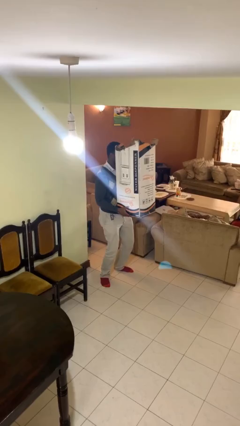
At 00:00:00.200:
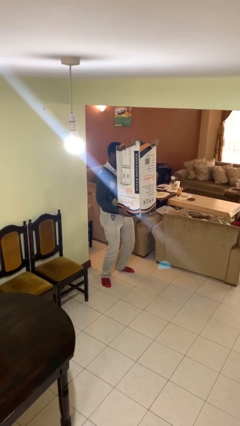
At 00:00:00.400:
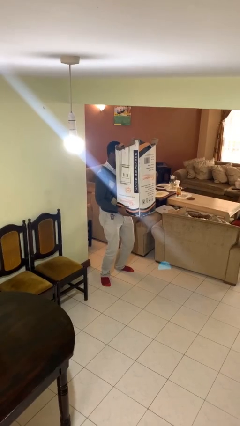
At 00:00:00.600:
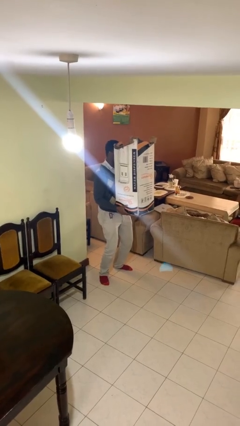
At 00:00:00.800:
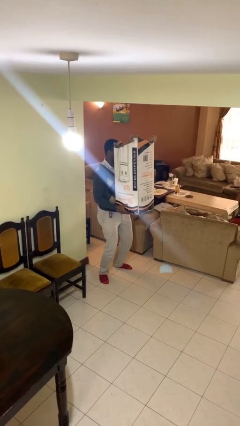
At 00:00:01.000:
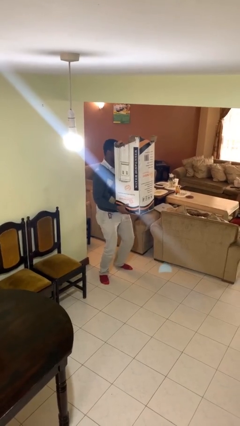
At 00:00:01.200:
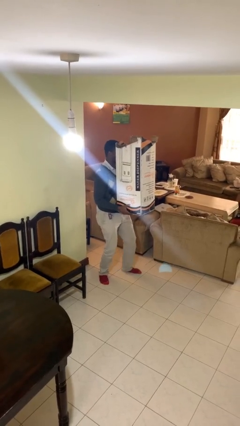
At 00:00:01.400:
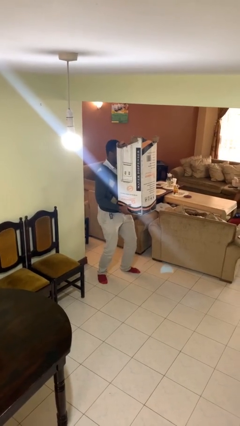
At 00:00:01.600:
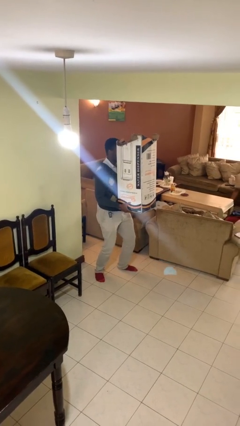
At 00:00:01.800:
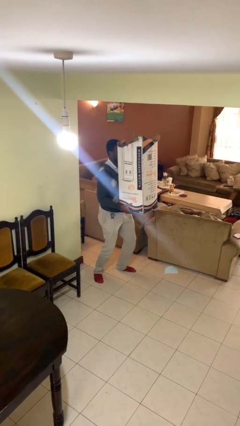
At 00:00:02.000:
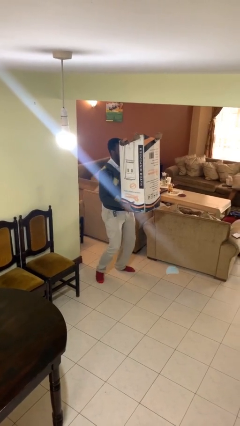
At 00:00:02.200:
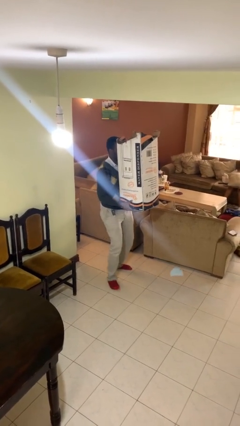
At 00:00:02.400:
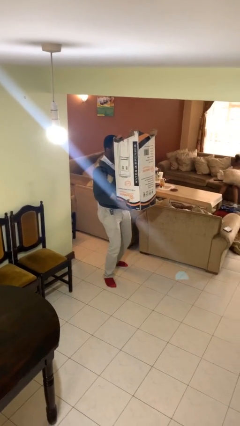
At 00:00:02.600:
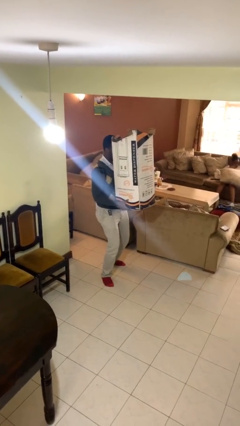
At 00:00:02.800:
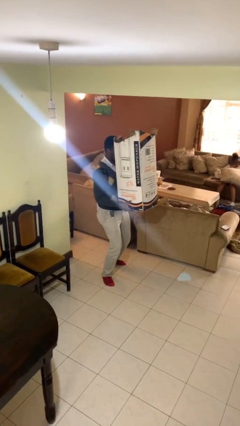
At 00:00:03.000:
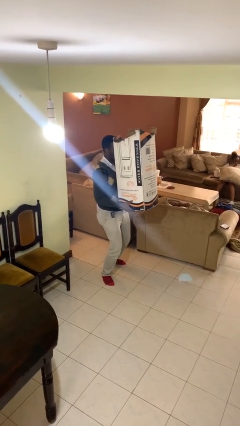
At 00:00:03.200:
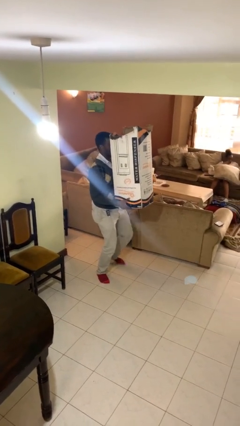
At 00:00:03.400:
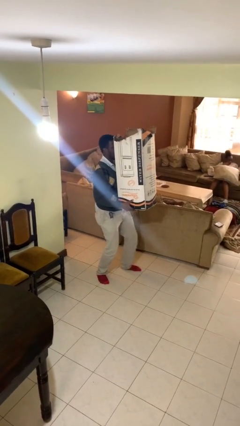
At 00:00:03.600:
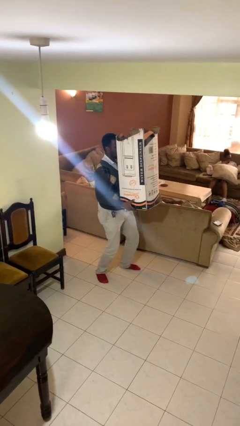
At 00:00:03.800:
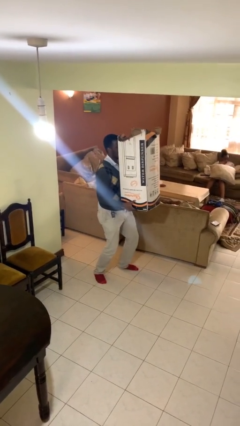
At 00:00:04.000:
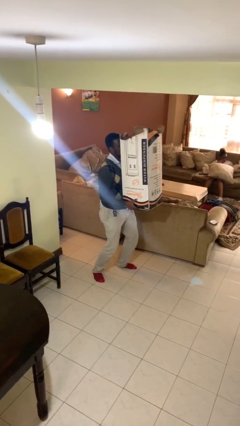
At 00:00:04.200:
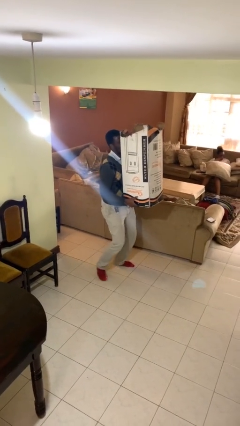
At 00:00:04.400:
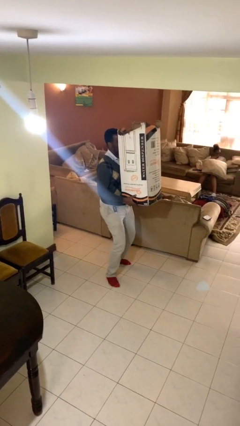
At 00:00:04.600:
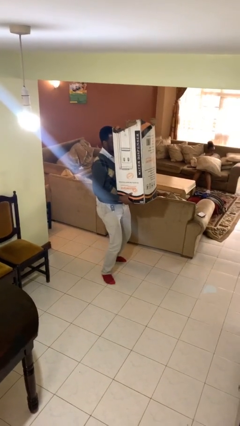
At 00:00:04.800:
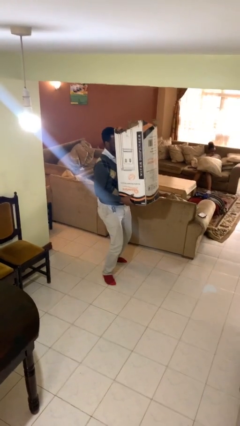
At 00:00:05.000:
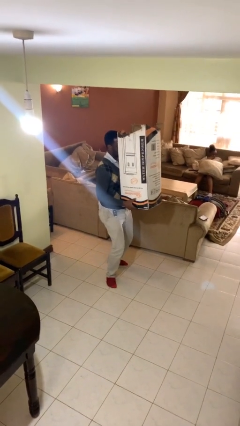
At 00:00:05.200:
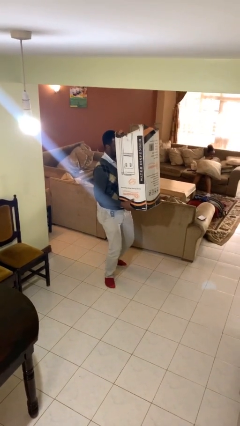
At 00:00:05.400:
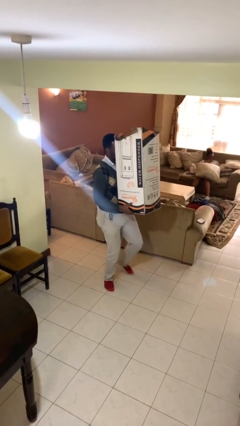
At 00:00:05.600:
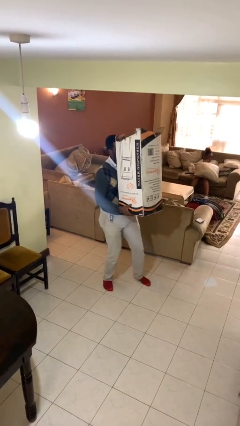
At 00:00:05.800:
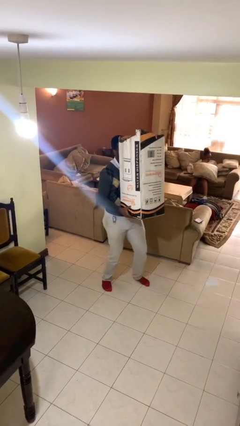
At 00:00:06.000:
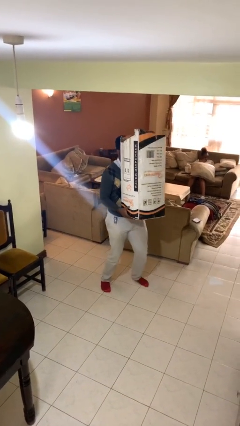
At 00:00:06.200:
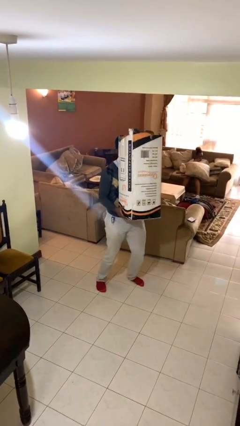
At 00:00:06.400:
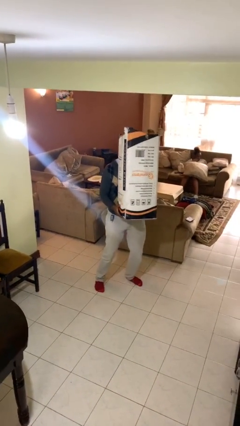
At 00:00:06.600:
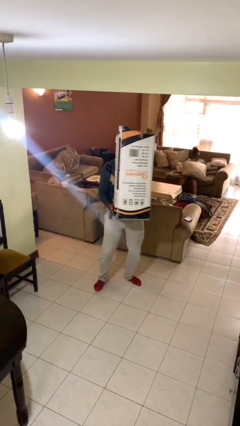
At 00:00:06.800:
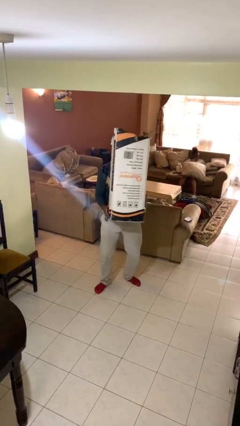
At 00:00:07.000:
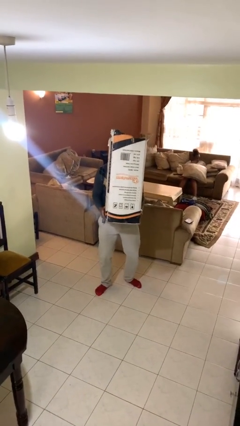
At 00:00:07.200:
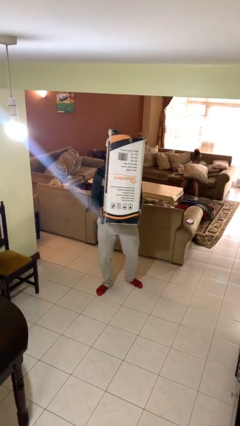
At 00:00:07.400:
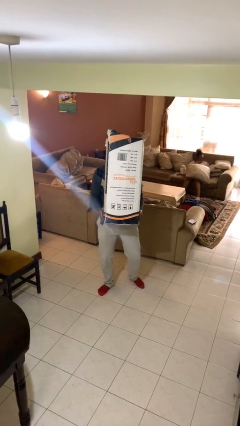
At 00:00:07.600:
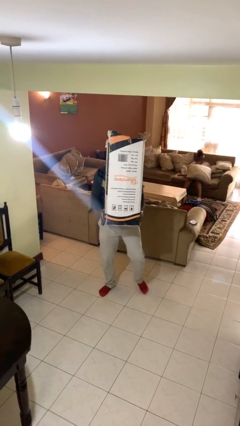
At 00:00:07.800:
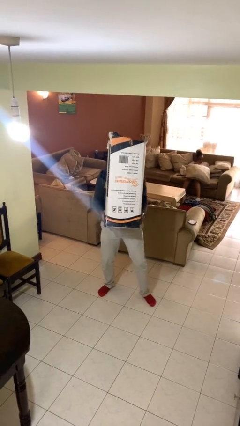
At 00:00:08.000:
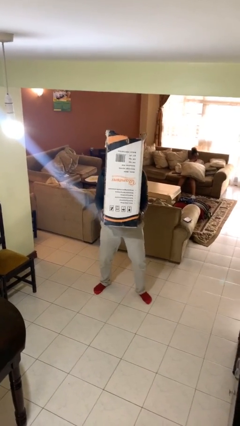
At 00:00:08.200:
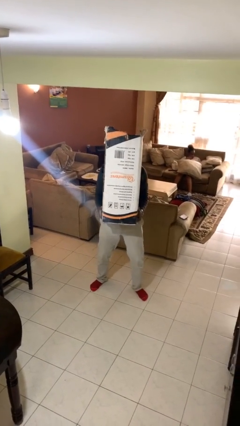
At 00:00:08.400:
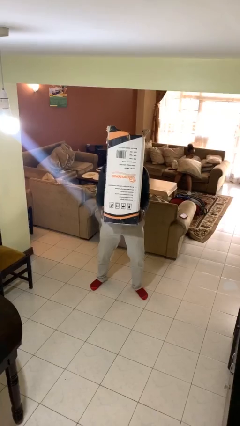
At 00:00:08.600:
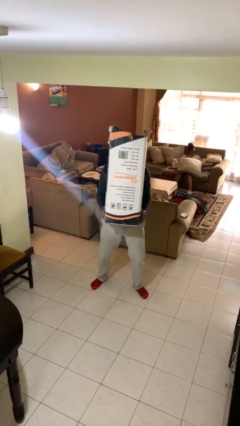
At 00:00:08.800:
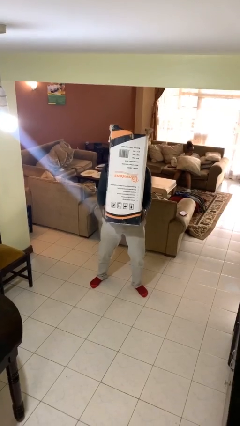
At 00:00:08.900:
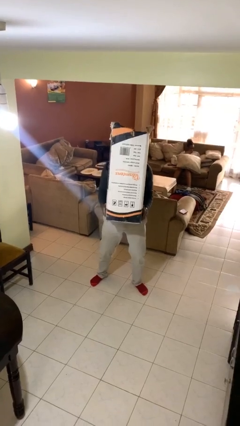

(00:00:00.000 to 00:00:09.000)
person carries heavy object

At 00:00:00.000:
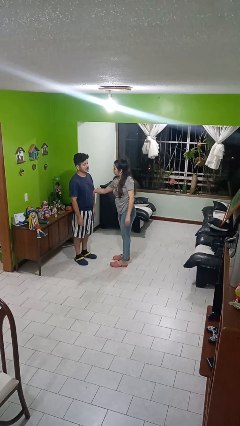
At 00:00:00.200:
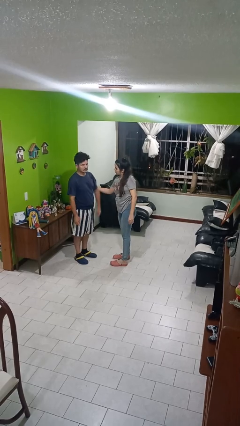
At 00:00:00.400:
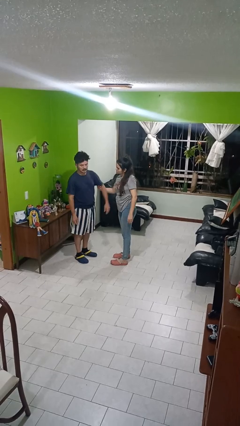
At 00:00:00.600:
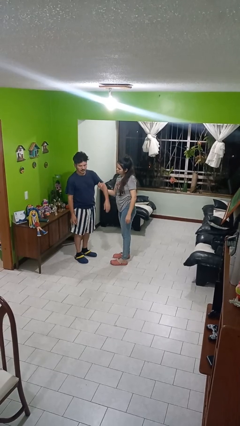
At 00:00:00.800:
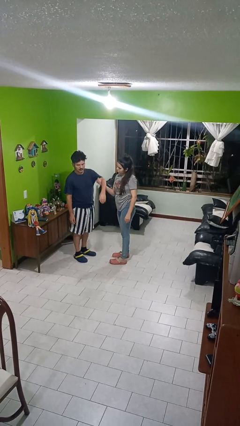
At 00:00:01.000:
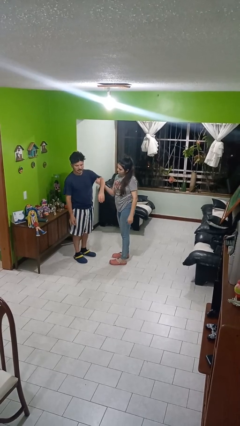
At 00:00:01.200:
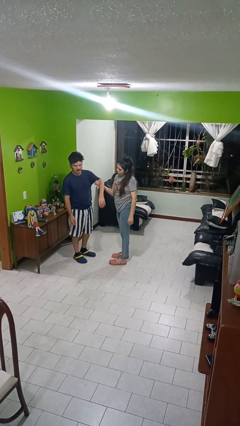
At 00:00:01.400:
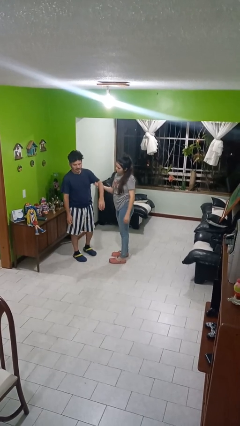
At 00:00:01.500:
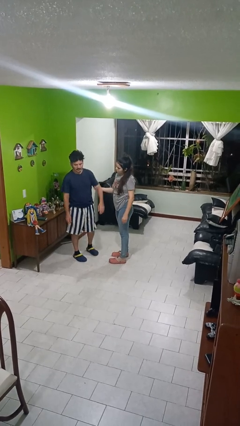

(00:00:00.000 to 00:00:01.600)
person grabs person by bicep

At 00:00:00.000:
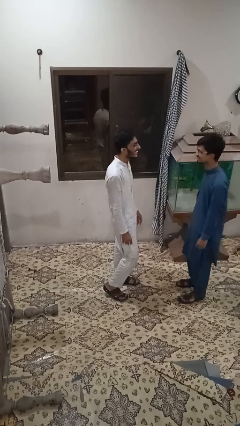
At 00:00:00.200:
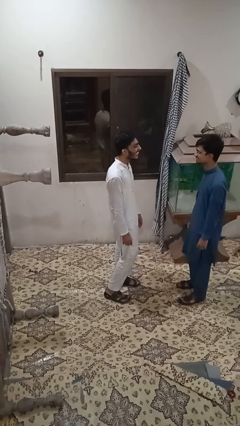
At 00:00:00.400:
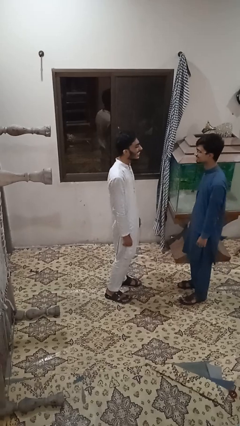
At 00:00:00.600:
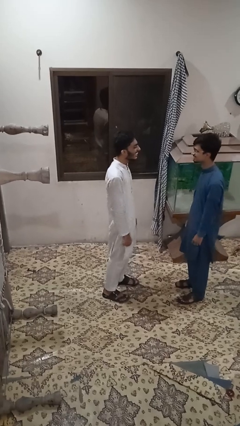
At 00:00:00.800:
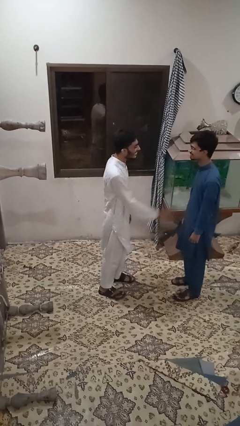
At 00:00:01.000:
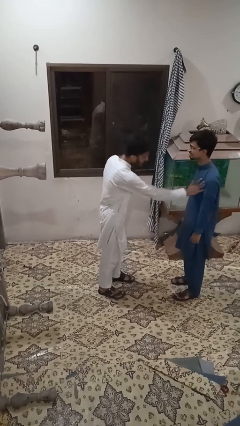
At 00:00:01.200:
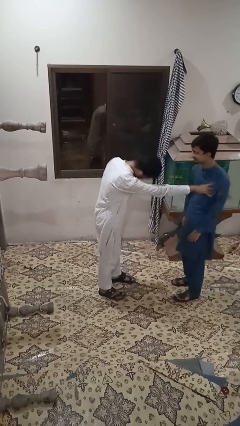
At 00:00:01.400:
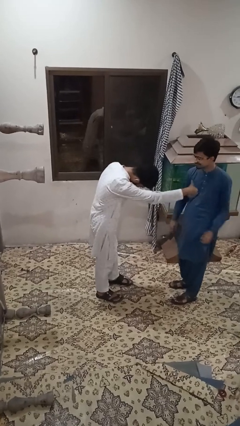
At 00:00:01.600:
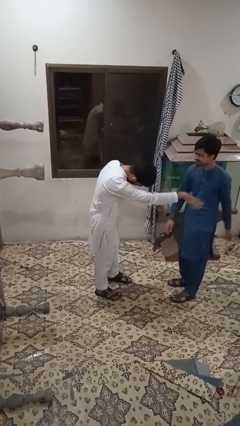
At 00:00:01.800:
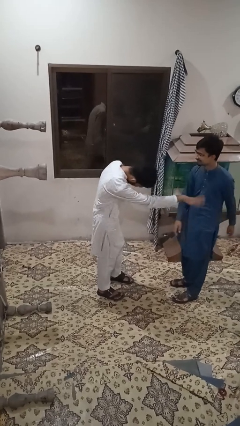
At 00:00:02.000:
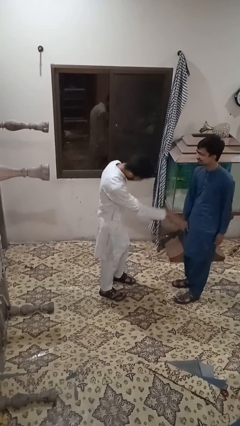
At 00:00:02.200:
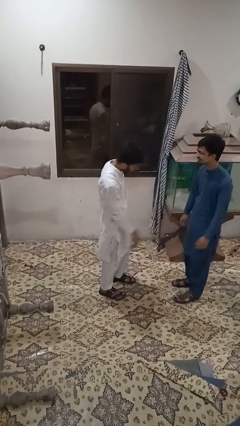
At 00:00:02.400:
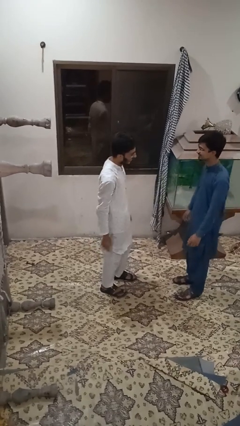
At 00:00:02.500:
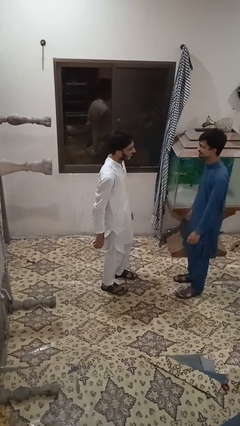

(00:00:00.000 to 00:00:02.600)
person shoves person

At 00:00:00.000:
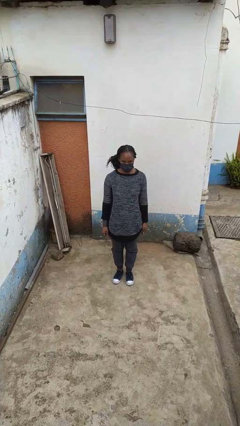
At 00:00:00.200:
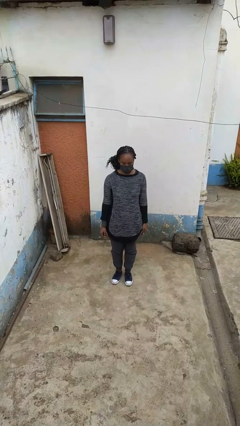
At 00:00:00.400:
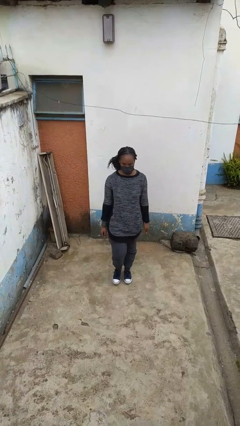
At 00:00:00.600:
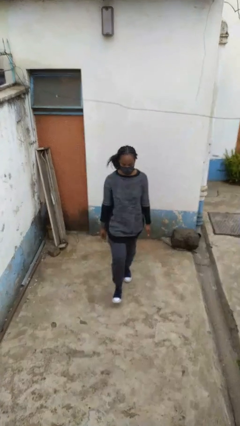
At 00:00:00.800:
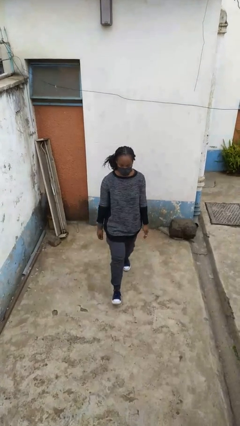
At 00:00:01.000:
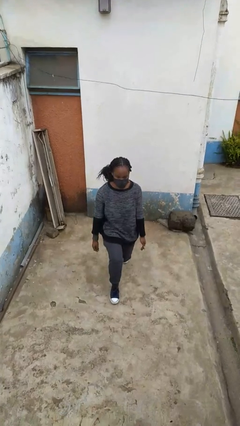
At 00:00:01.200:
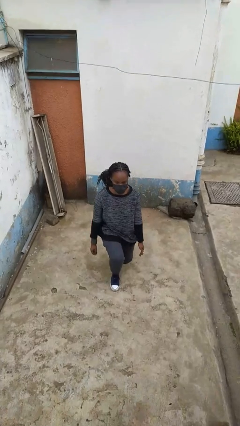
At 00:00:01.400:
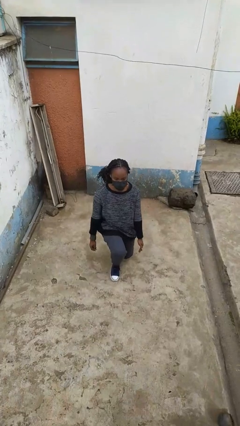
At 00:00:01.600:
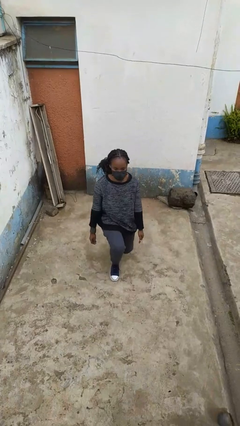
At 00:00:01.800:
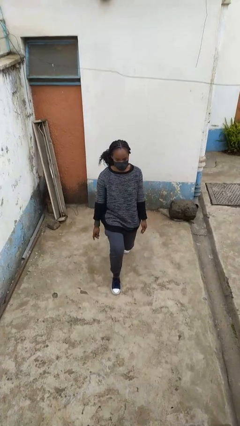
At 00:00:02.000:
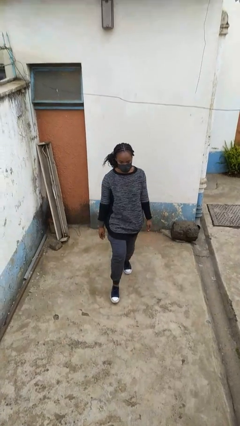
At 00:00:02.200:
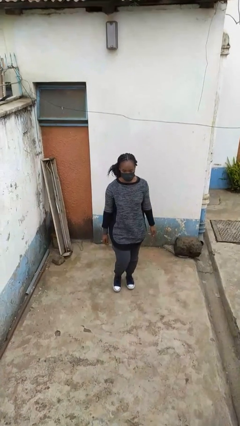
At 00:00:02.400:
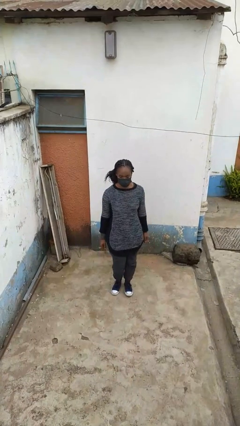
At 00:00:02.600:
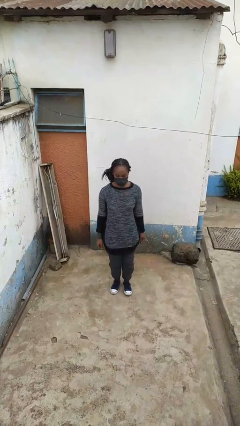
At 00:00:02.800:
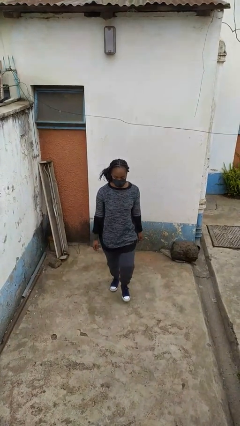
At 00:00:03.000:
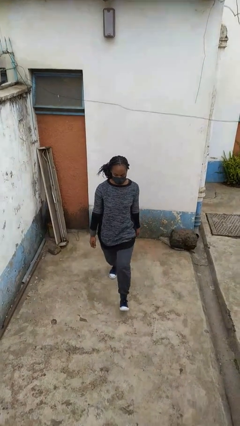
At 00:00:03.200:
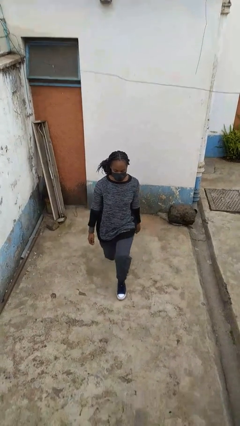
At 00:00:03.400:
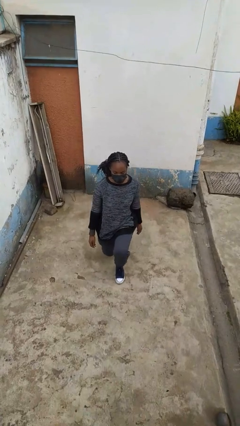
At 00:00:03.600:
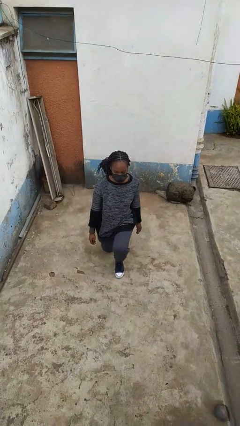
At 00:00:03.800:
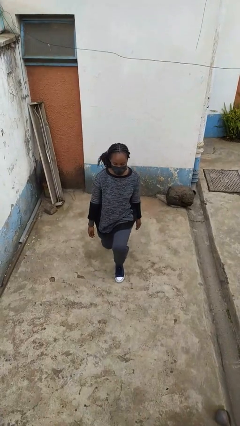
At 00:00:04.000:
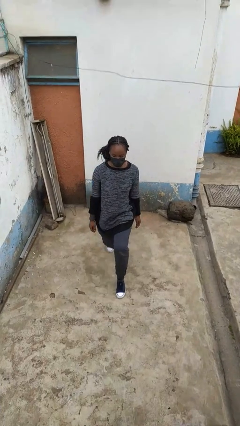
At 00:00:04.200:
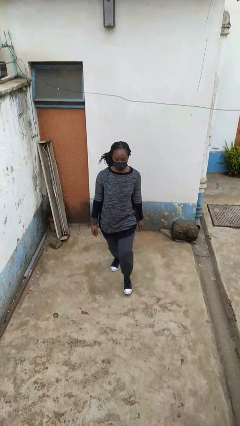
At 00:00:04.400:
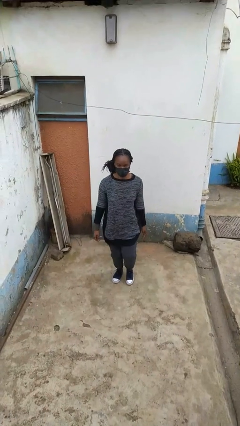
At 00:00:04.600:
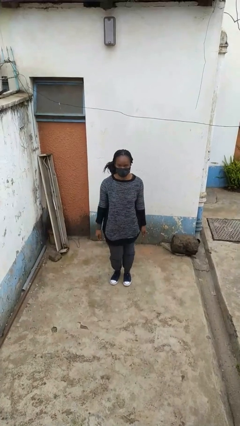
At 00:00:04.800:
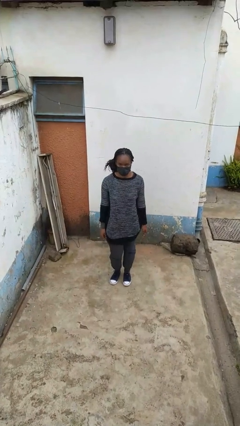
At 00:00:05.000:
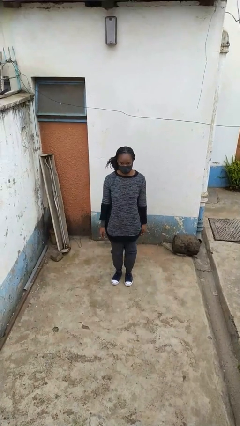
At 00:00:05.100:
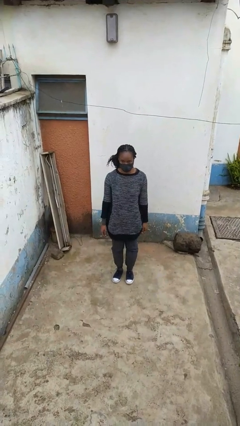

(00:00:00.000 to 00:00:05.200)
person exercises with lunges
